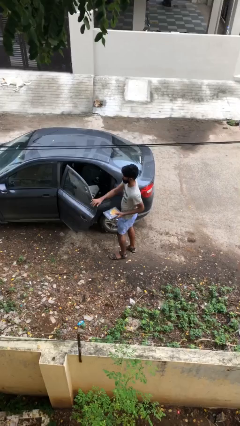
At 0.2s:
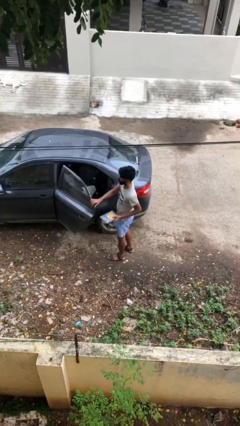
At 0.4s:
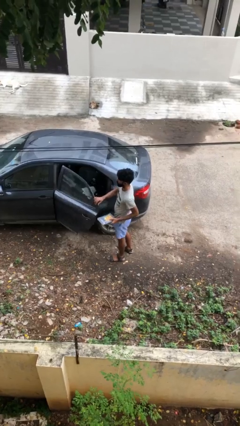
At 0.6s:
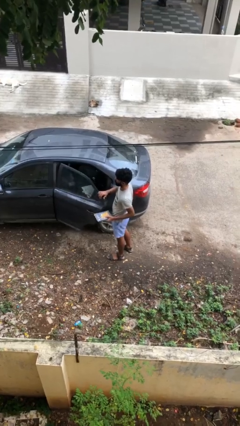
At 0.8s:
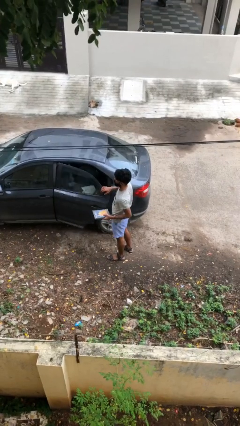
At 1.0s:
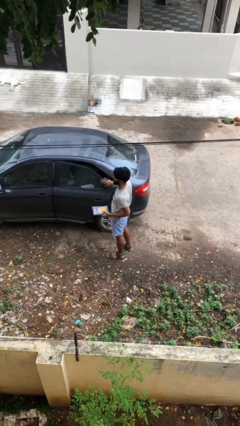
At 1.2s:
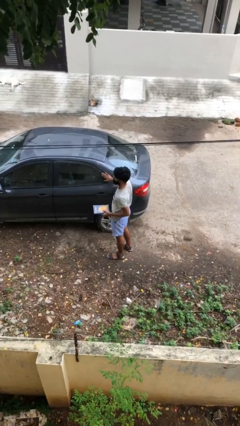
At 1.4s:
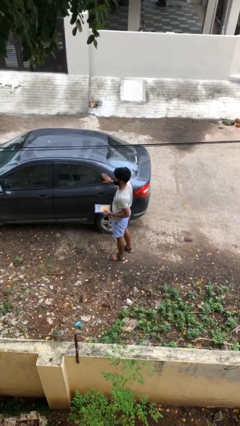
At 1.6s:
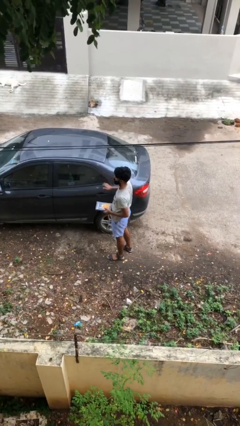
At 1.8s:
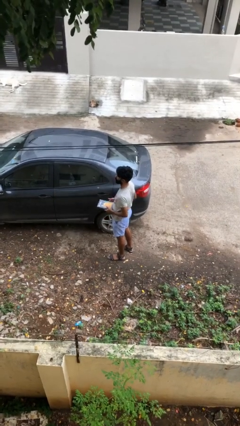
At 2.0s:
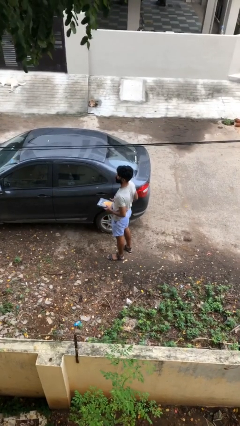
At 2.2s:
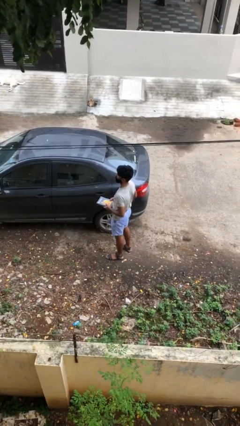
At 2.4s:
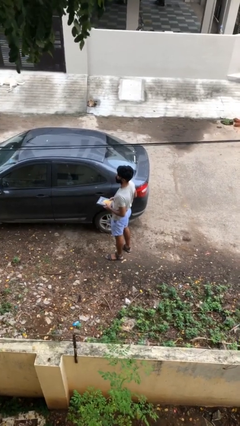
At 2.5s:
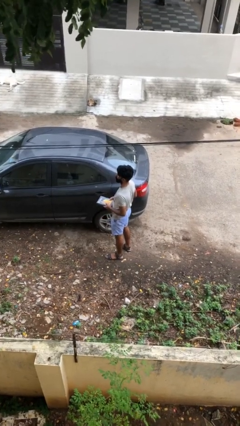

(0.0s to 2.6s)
person closes car door

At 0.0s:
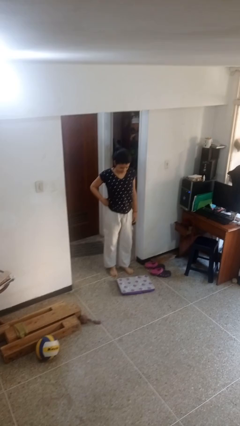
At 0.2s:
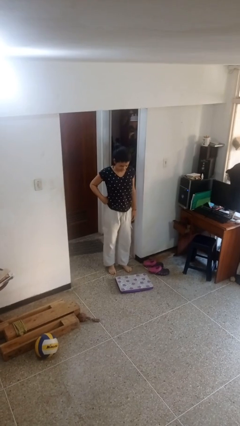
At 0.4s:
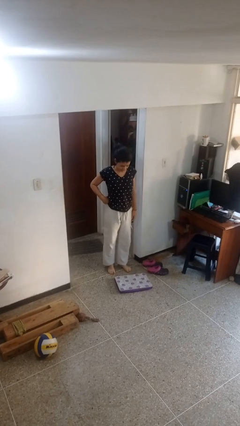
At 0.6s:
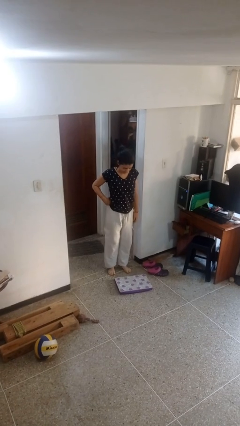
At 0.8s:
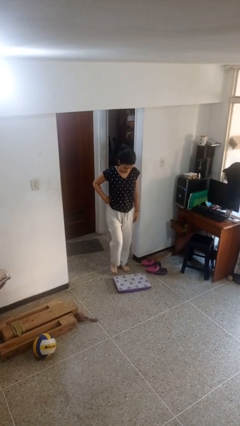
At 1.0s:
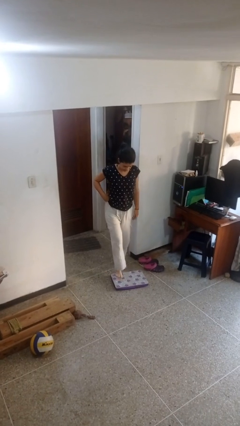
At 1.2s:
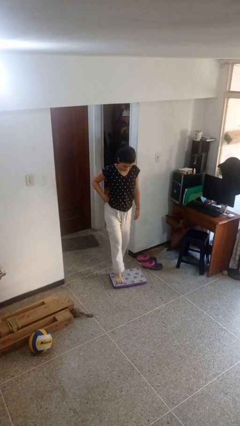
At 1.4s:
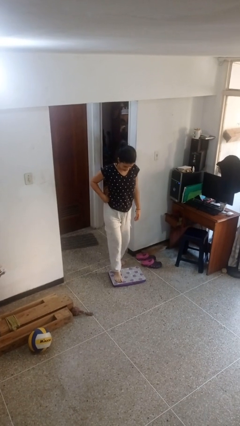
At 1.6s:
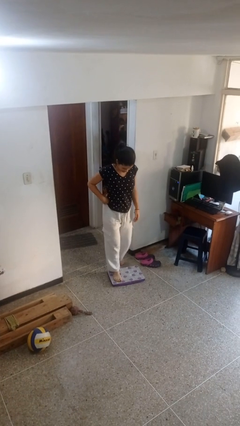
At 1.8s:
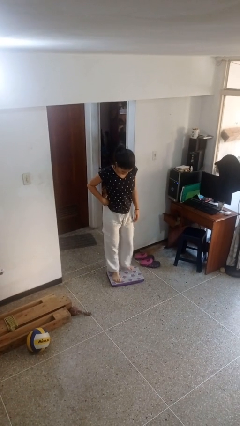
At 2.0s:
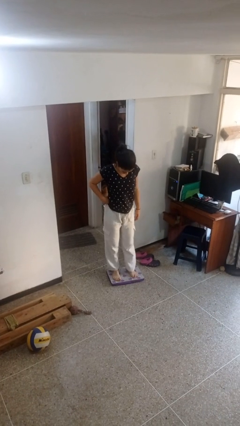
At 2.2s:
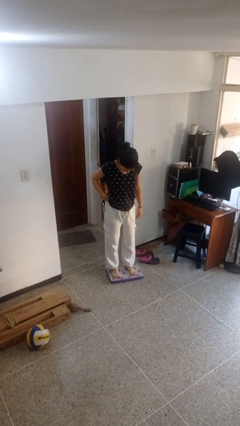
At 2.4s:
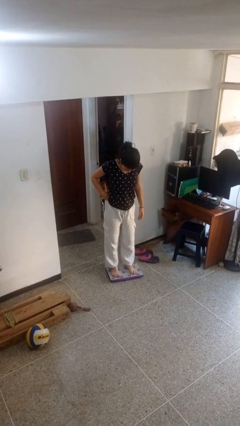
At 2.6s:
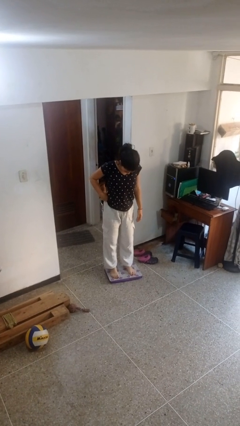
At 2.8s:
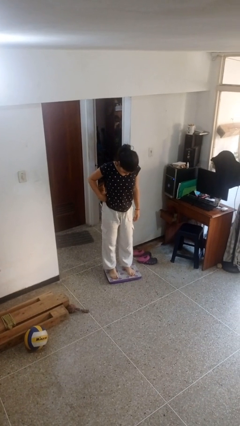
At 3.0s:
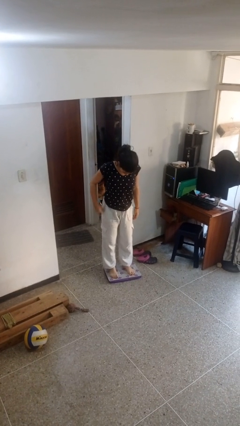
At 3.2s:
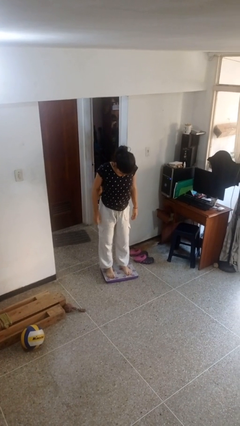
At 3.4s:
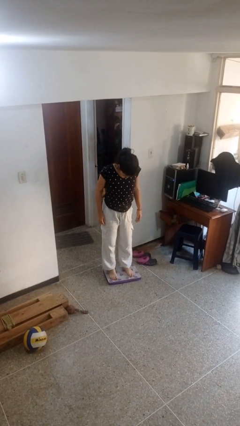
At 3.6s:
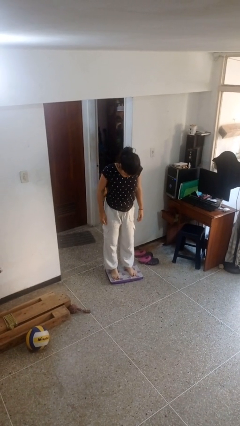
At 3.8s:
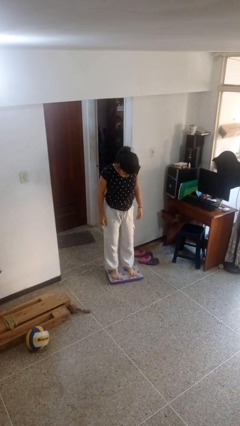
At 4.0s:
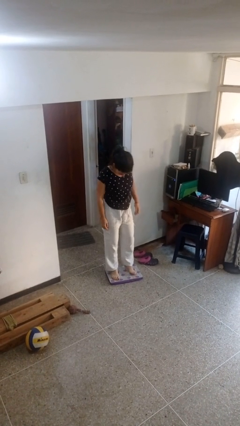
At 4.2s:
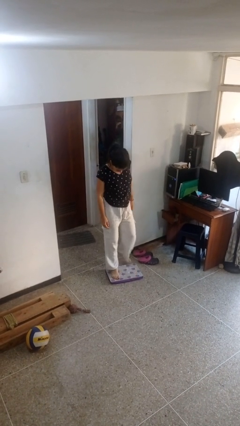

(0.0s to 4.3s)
person uses bodyweight scale

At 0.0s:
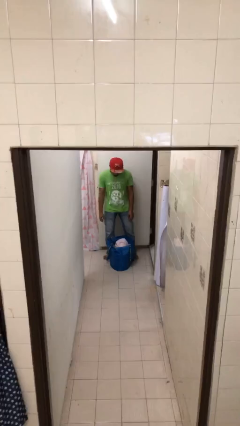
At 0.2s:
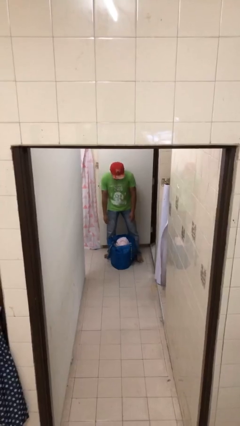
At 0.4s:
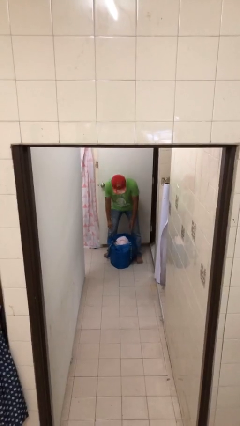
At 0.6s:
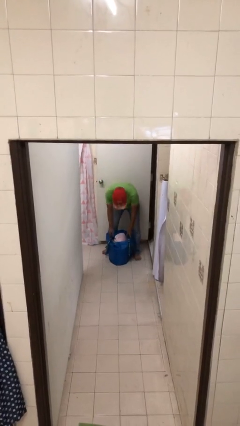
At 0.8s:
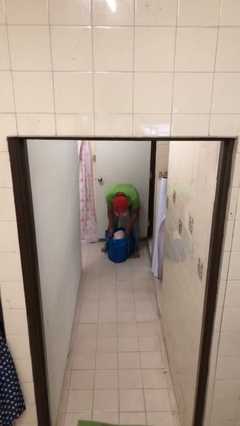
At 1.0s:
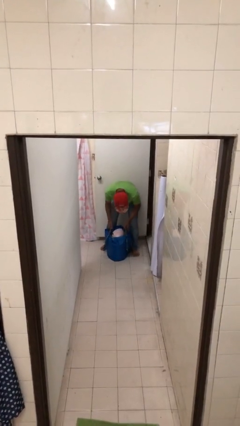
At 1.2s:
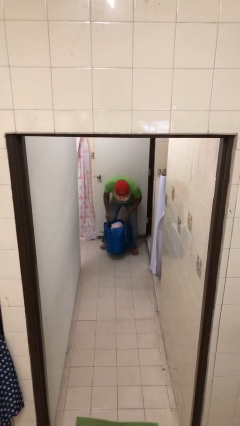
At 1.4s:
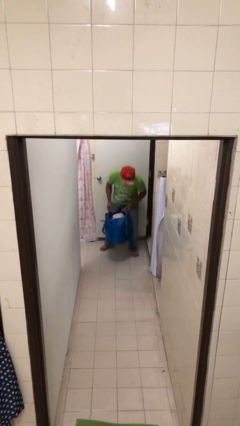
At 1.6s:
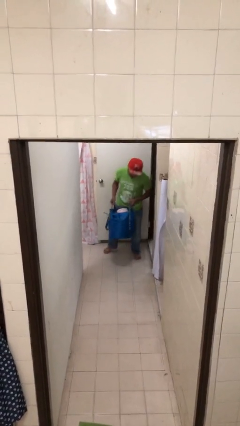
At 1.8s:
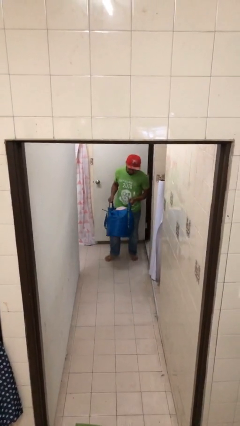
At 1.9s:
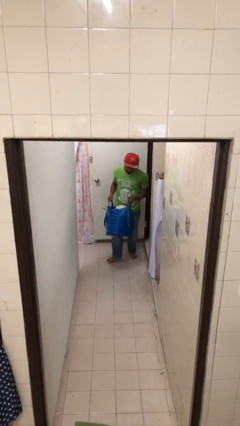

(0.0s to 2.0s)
person picks up object from floor

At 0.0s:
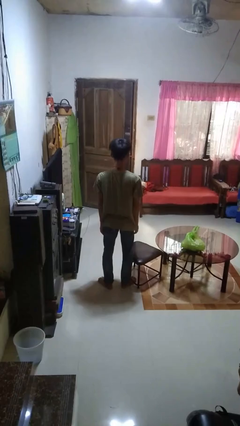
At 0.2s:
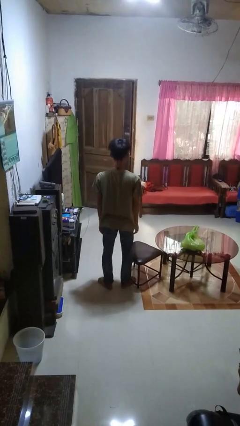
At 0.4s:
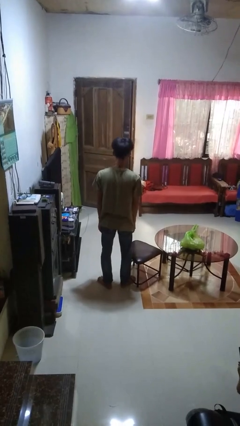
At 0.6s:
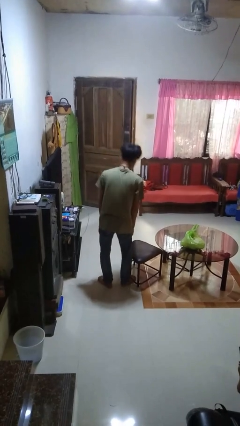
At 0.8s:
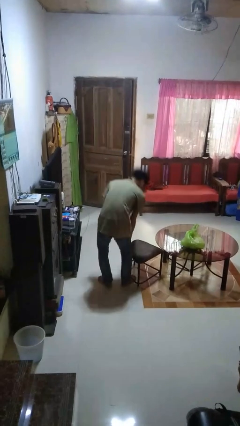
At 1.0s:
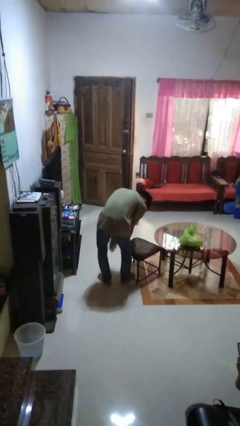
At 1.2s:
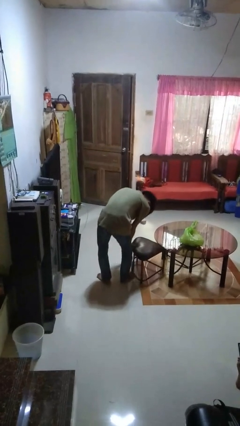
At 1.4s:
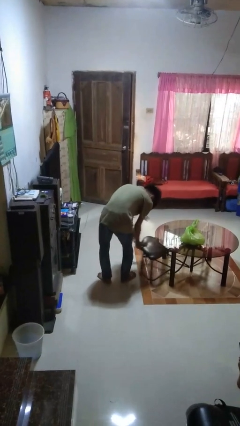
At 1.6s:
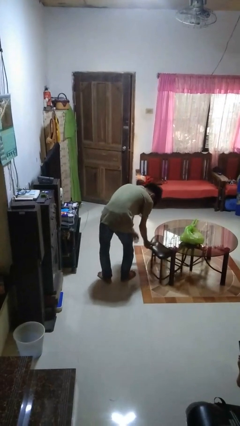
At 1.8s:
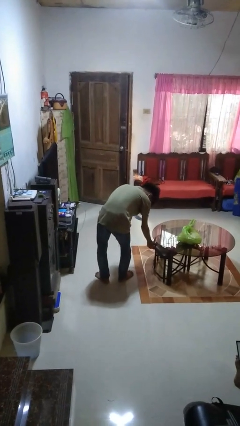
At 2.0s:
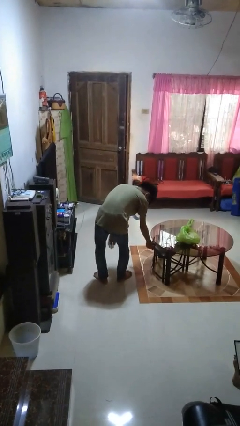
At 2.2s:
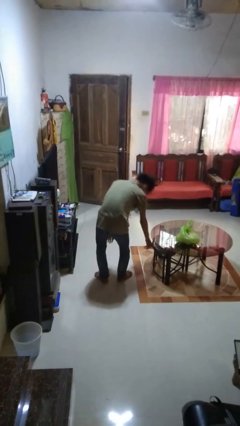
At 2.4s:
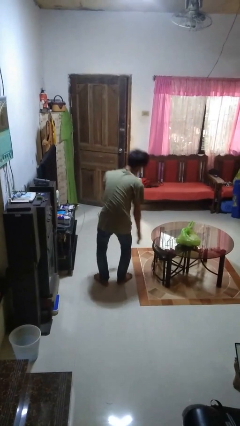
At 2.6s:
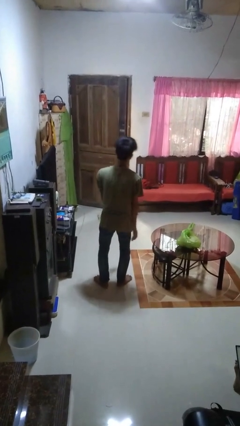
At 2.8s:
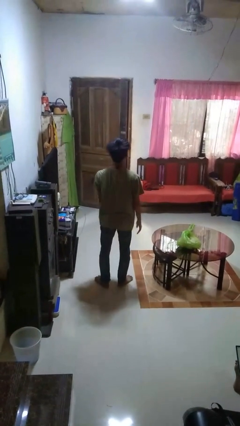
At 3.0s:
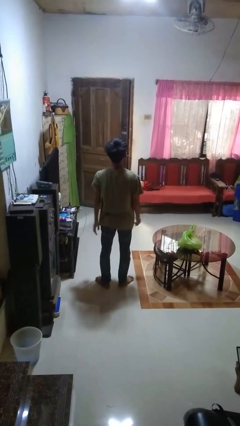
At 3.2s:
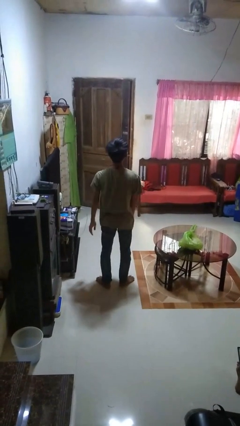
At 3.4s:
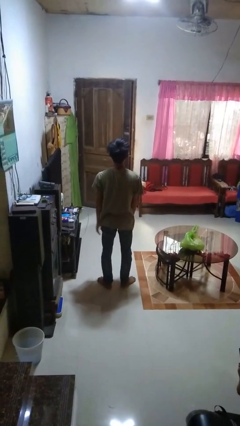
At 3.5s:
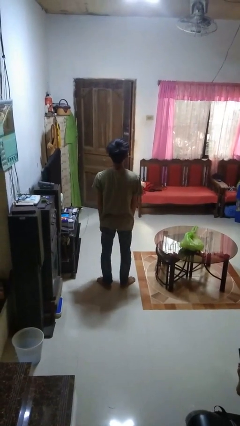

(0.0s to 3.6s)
person pushes in chair

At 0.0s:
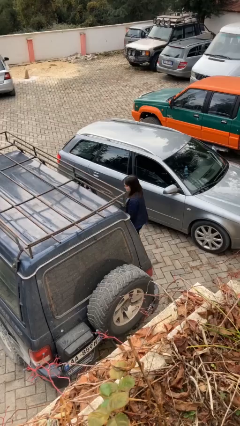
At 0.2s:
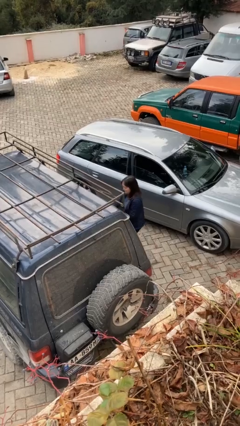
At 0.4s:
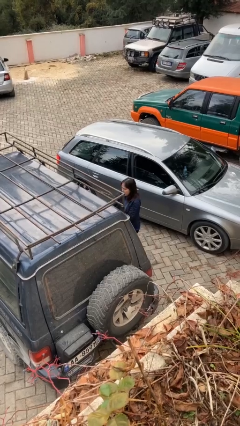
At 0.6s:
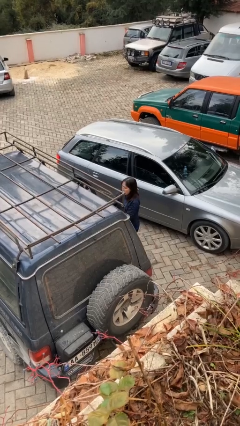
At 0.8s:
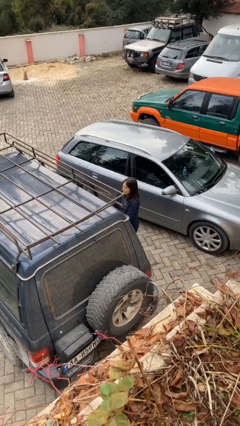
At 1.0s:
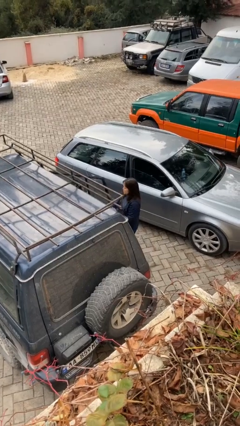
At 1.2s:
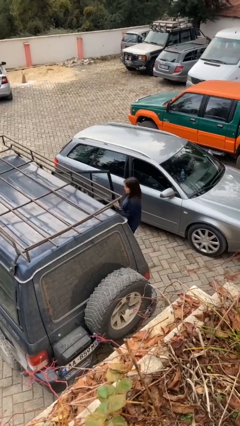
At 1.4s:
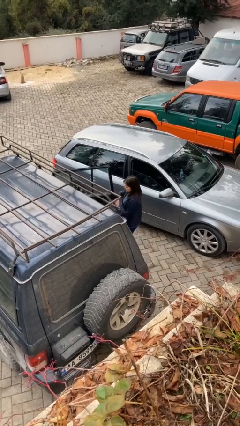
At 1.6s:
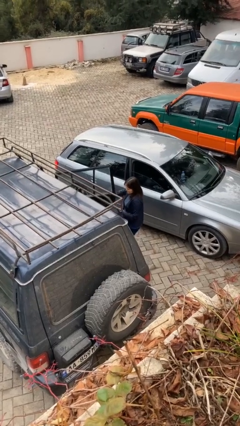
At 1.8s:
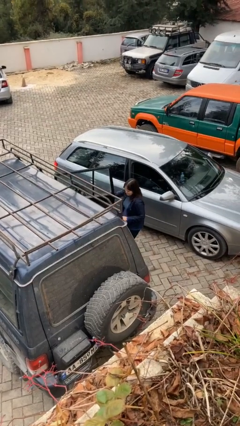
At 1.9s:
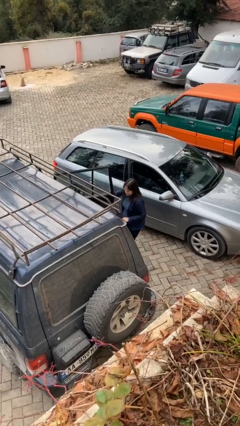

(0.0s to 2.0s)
person opens car door

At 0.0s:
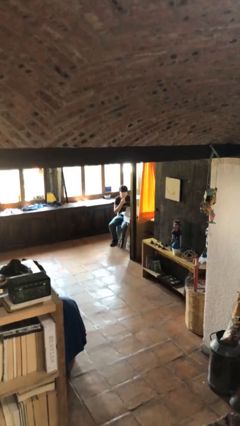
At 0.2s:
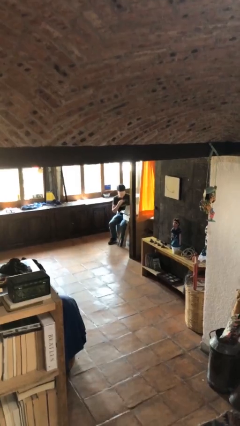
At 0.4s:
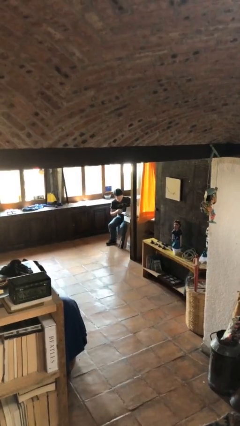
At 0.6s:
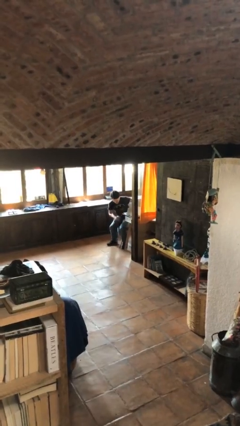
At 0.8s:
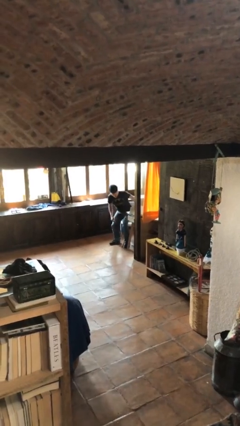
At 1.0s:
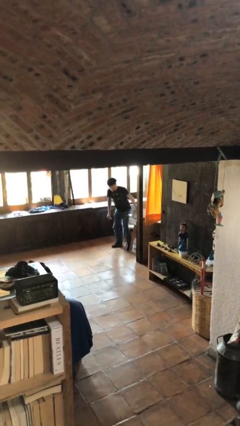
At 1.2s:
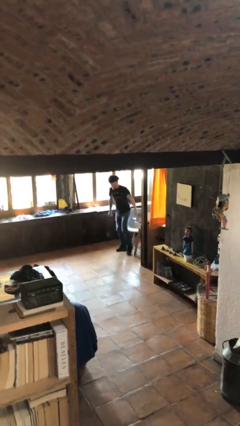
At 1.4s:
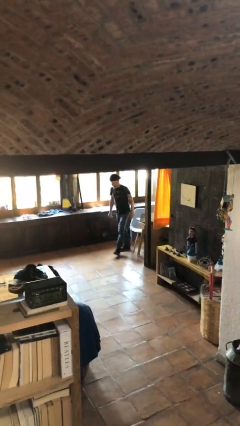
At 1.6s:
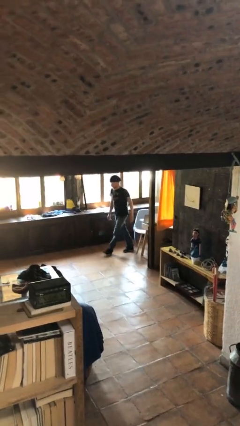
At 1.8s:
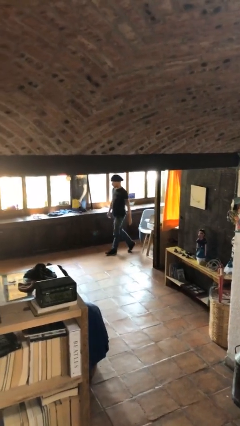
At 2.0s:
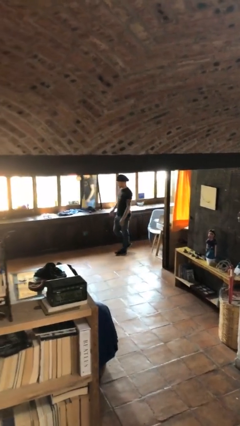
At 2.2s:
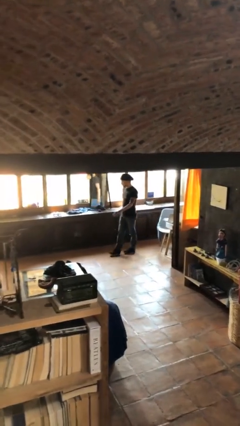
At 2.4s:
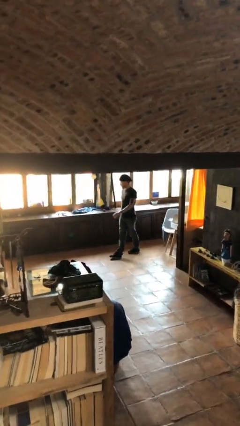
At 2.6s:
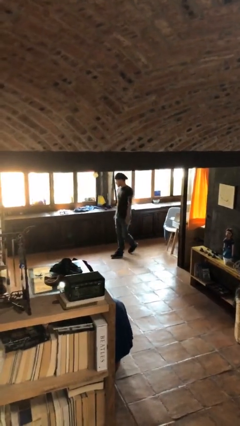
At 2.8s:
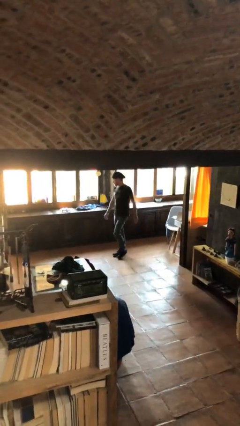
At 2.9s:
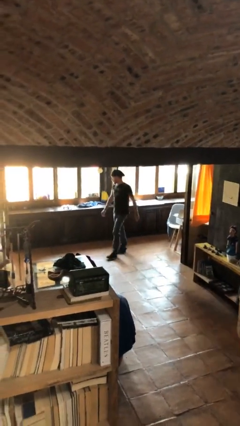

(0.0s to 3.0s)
person stands up
